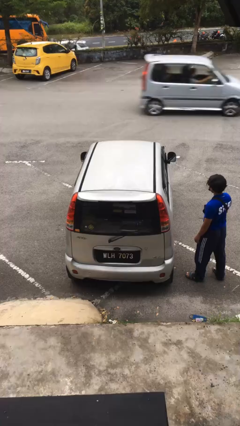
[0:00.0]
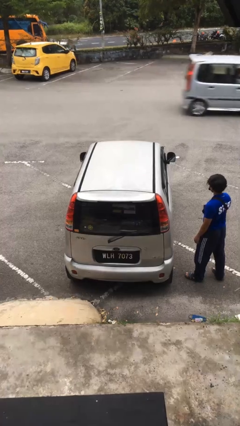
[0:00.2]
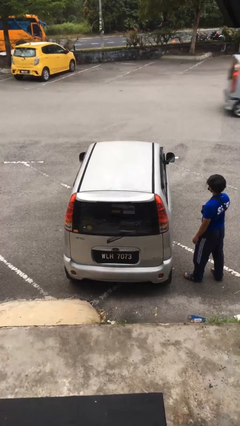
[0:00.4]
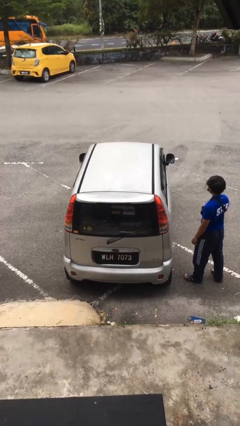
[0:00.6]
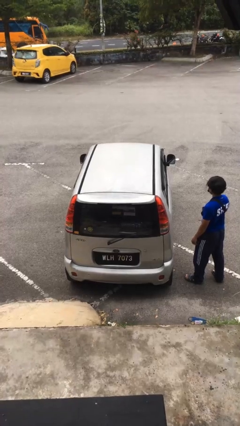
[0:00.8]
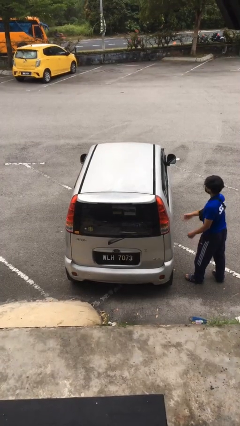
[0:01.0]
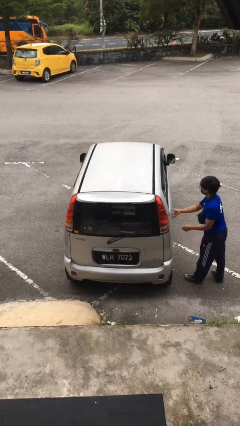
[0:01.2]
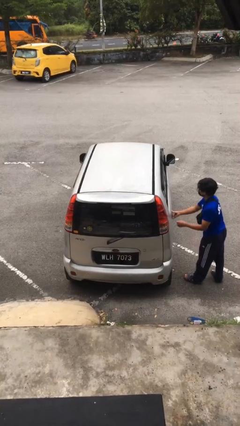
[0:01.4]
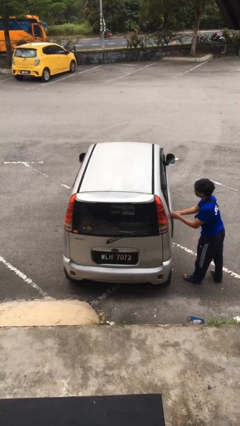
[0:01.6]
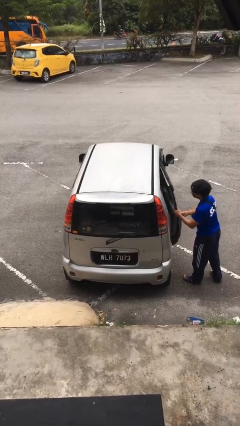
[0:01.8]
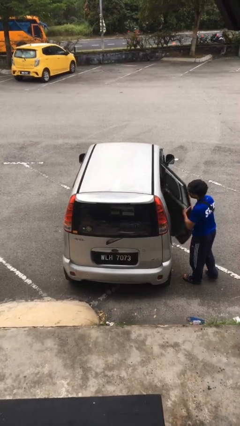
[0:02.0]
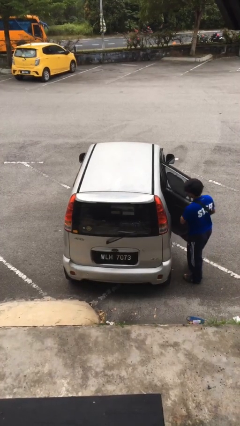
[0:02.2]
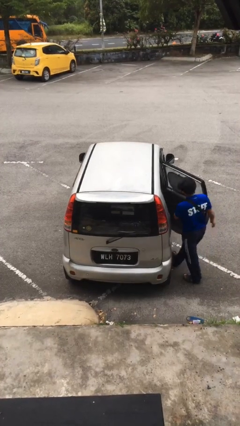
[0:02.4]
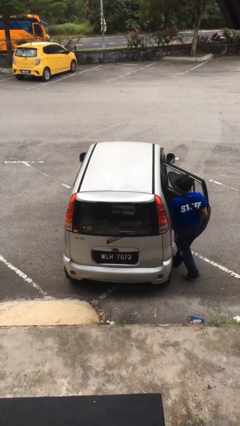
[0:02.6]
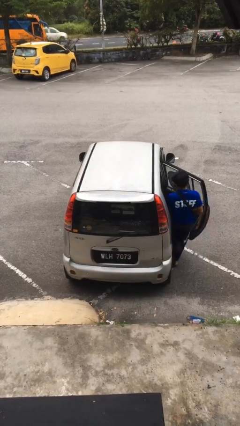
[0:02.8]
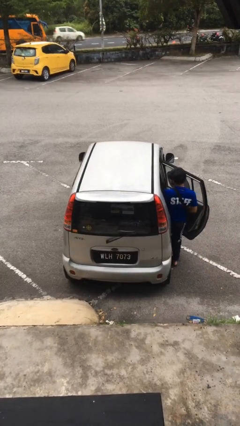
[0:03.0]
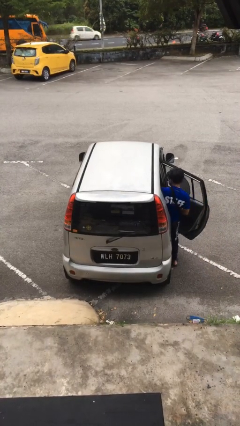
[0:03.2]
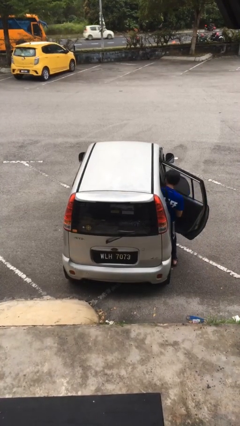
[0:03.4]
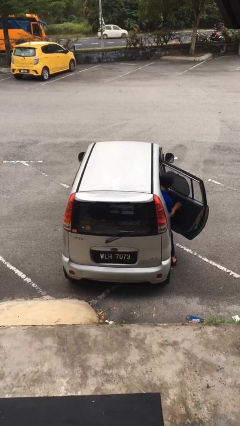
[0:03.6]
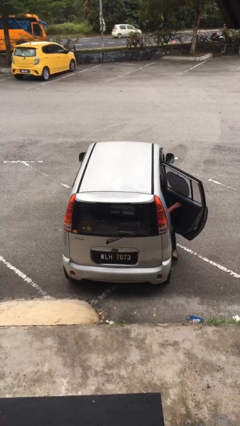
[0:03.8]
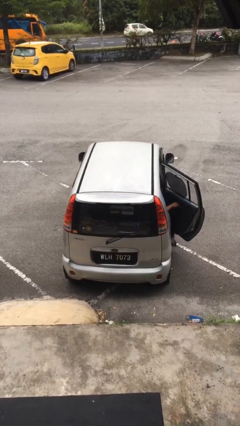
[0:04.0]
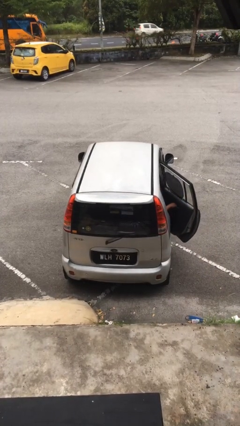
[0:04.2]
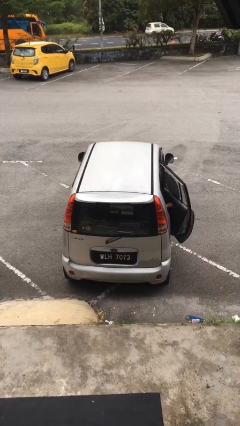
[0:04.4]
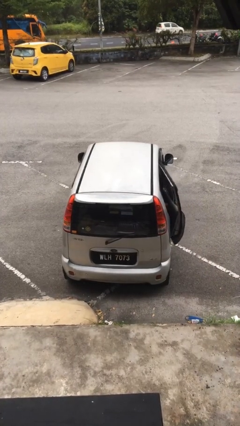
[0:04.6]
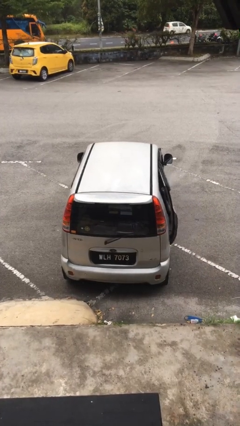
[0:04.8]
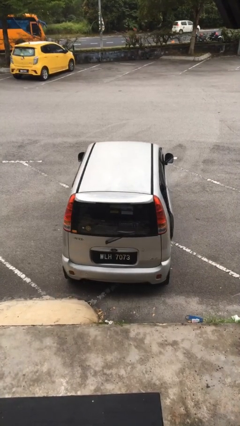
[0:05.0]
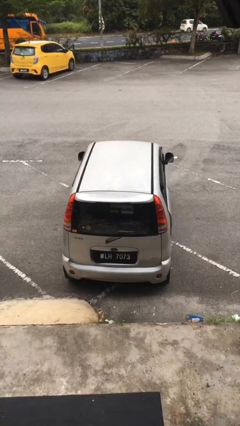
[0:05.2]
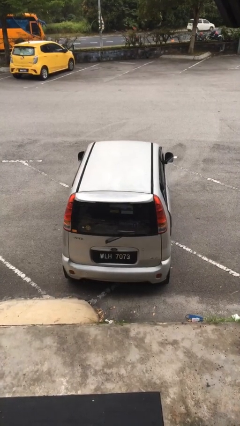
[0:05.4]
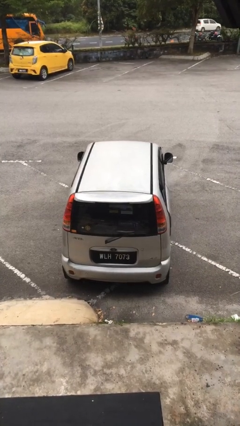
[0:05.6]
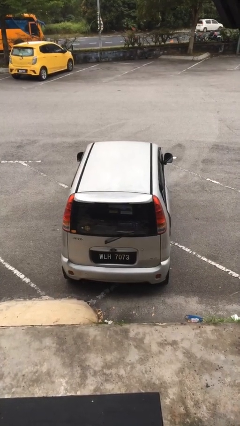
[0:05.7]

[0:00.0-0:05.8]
car picks up person

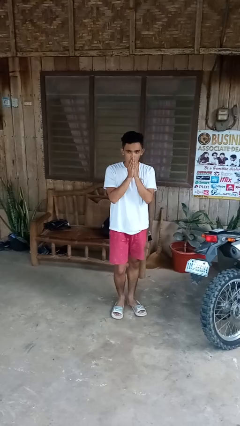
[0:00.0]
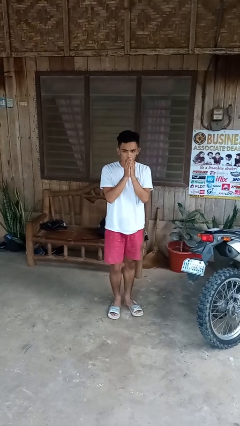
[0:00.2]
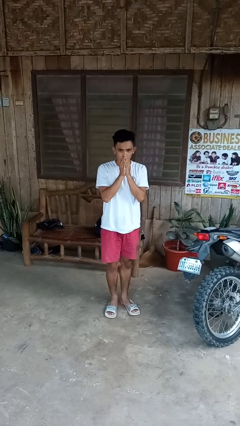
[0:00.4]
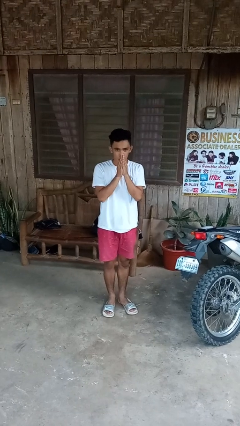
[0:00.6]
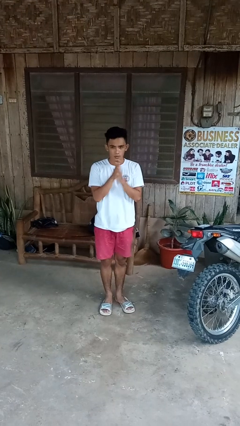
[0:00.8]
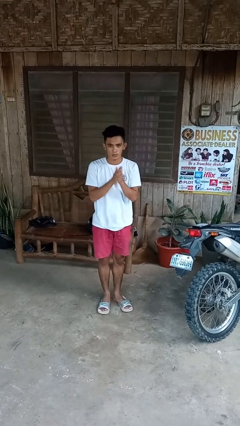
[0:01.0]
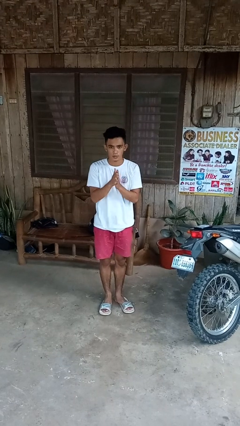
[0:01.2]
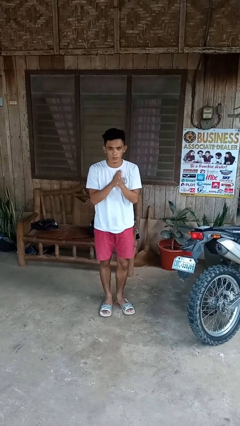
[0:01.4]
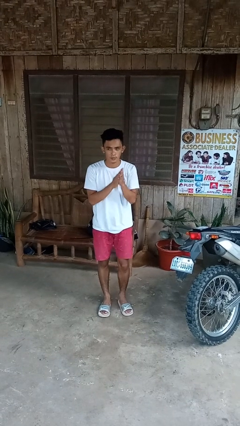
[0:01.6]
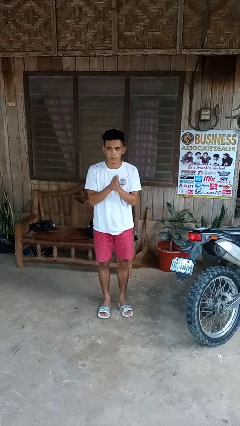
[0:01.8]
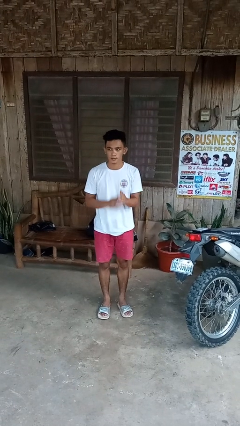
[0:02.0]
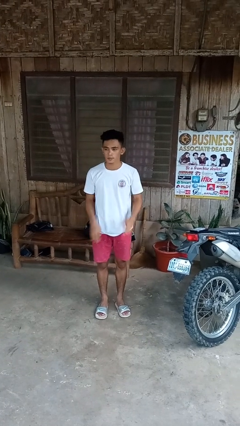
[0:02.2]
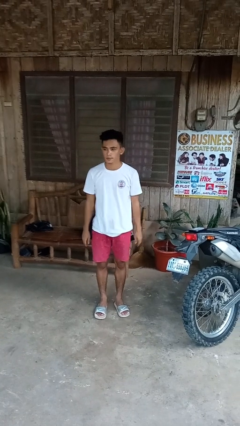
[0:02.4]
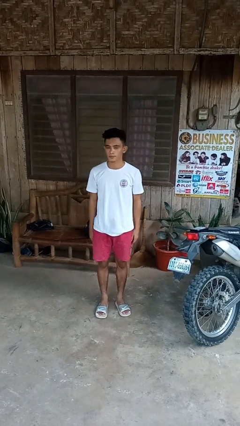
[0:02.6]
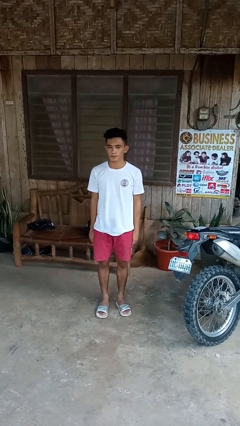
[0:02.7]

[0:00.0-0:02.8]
person blows into hands

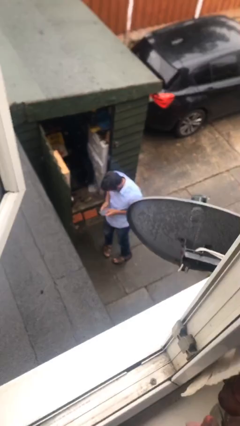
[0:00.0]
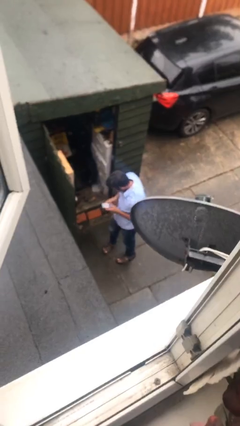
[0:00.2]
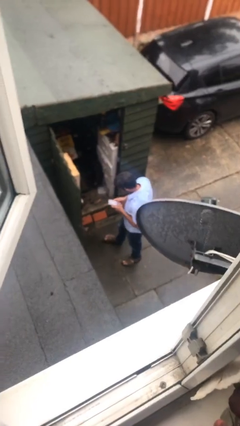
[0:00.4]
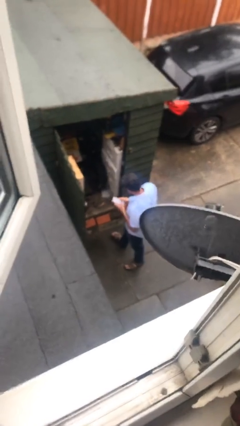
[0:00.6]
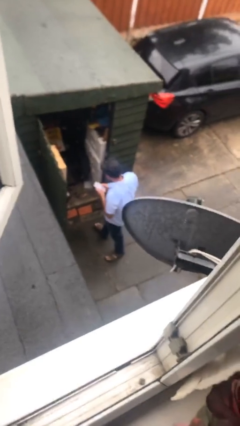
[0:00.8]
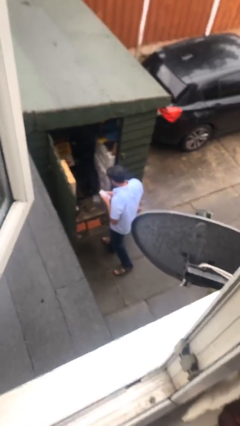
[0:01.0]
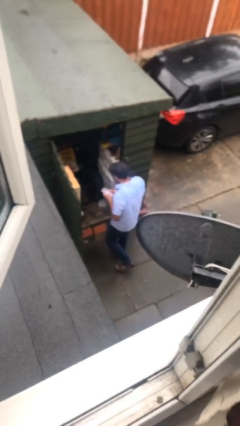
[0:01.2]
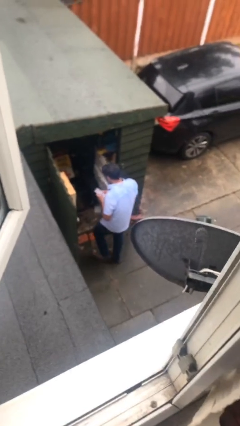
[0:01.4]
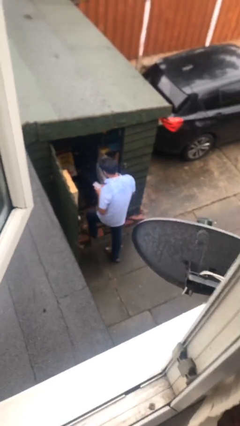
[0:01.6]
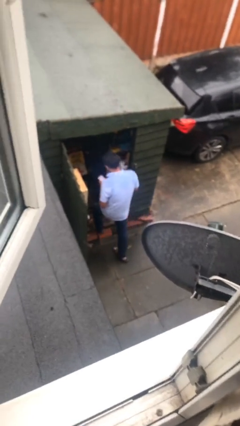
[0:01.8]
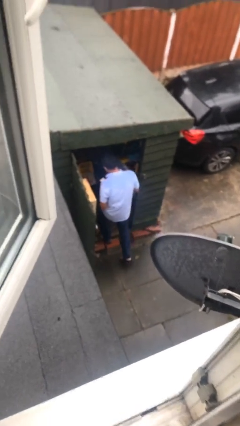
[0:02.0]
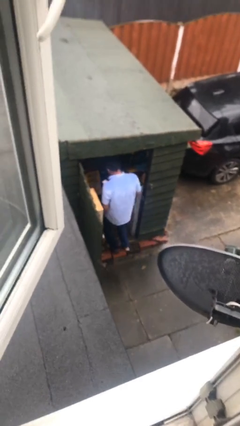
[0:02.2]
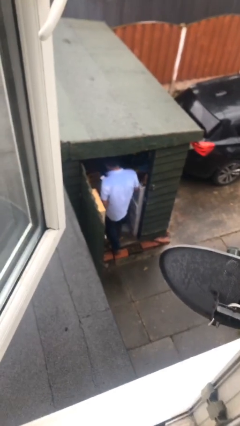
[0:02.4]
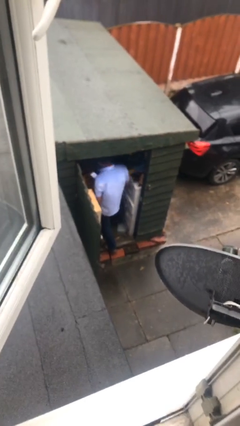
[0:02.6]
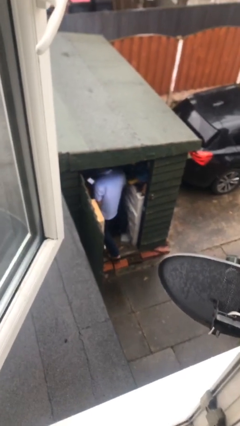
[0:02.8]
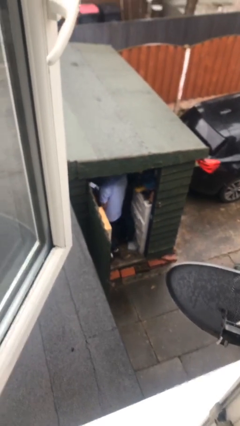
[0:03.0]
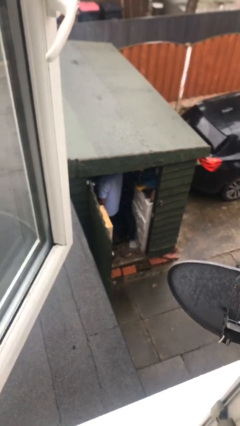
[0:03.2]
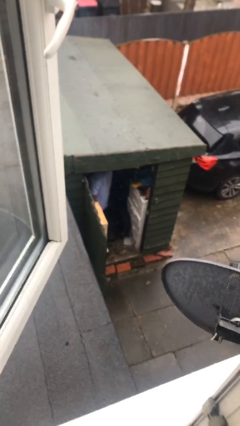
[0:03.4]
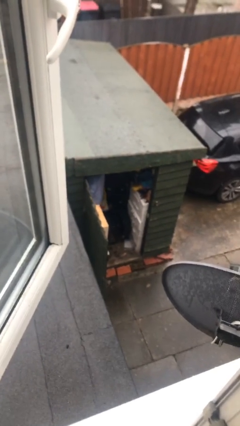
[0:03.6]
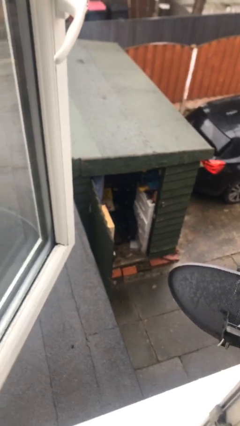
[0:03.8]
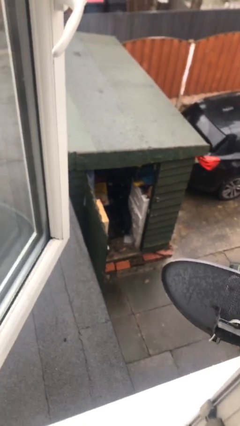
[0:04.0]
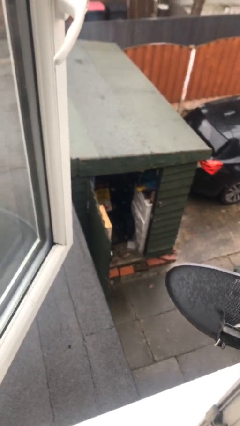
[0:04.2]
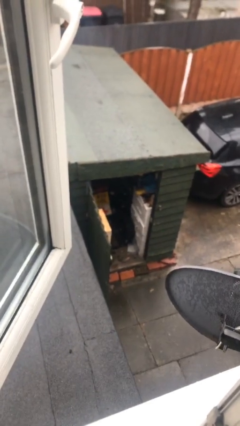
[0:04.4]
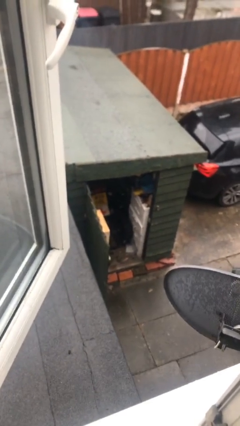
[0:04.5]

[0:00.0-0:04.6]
person exits scene through structure

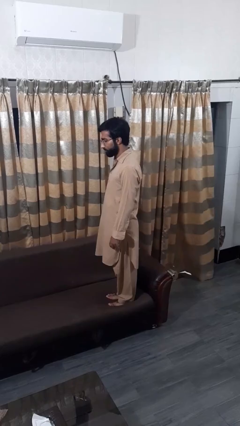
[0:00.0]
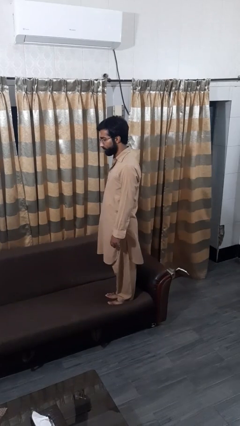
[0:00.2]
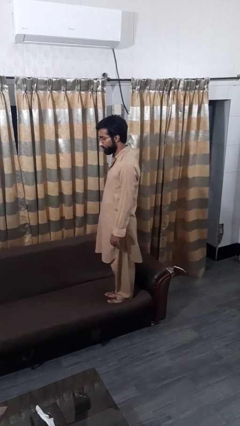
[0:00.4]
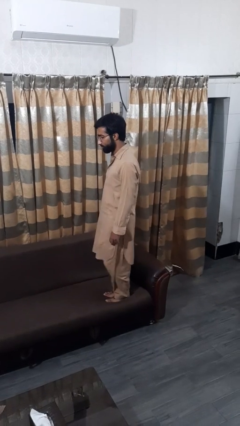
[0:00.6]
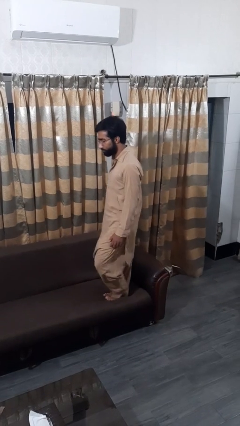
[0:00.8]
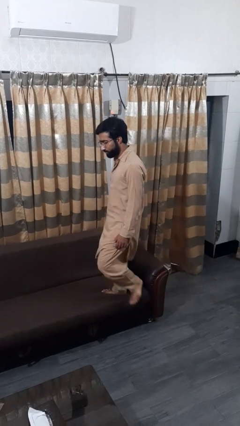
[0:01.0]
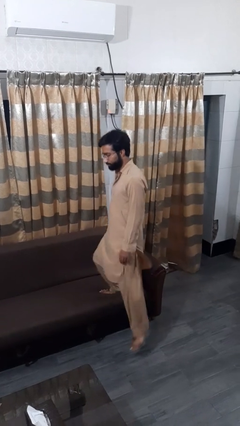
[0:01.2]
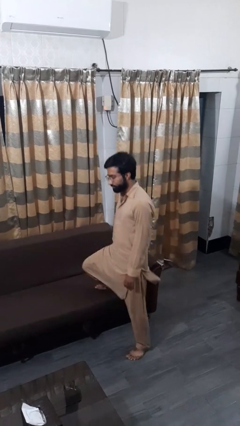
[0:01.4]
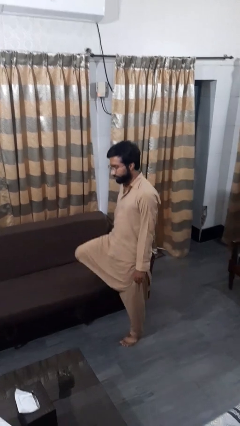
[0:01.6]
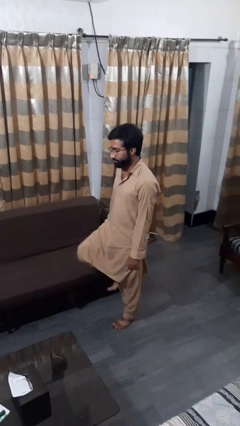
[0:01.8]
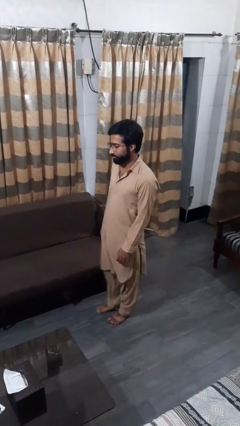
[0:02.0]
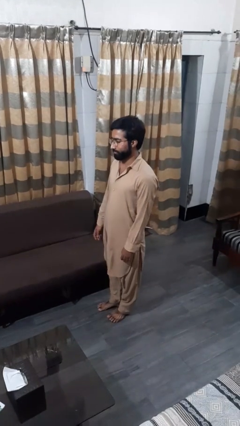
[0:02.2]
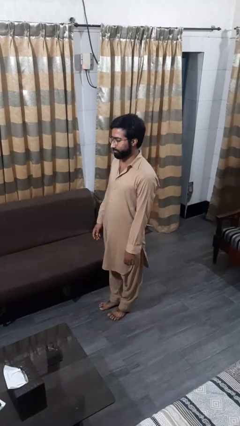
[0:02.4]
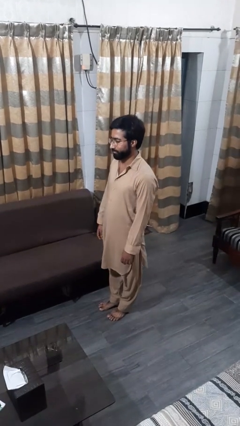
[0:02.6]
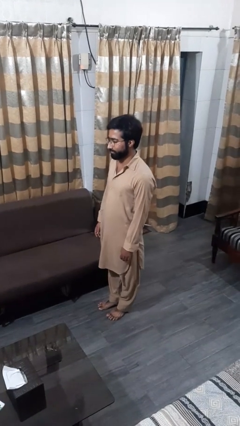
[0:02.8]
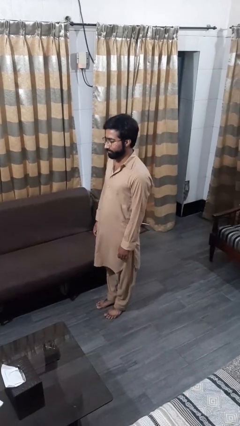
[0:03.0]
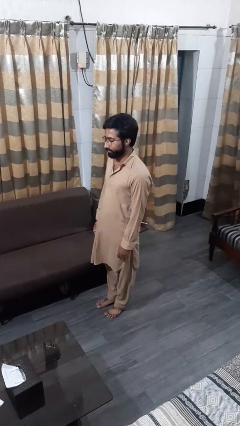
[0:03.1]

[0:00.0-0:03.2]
person climbs off couch

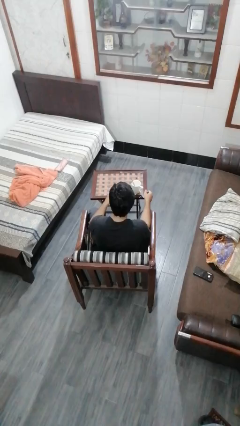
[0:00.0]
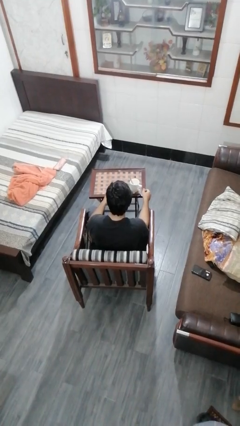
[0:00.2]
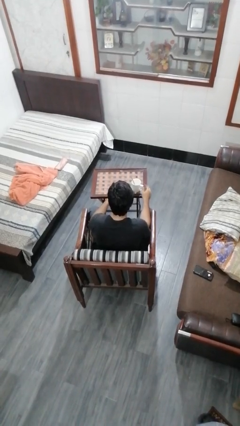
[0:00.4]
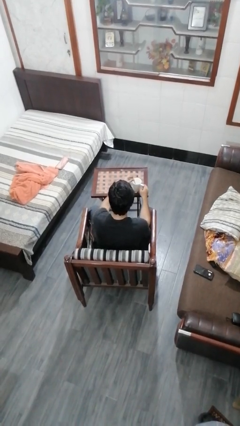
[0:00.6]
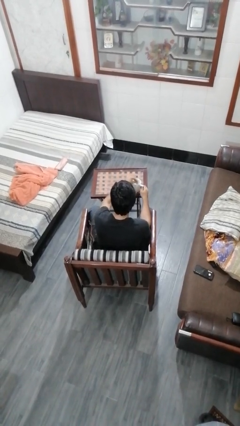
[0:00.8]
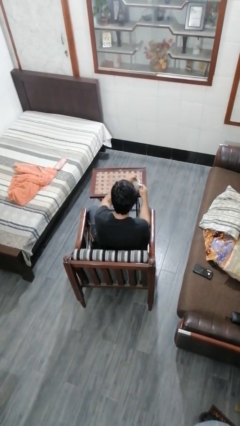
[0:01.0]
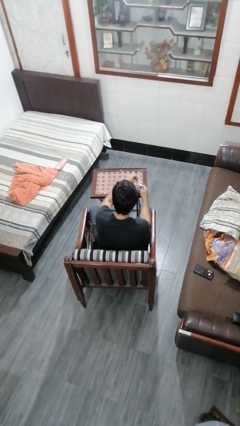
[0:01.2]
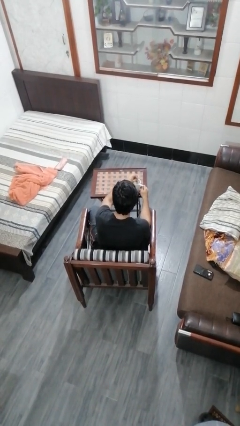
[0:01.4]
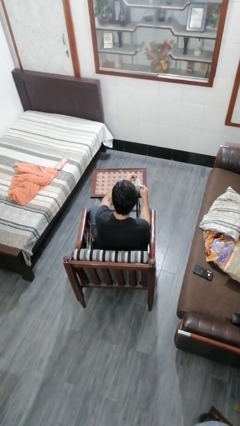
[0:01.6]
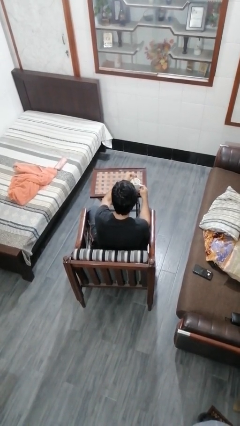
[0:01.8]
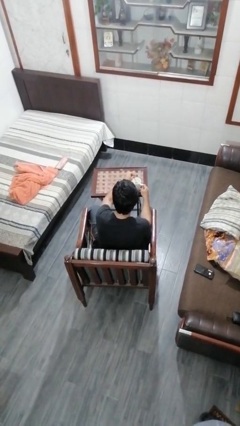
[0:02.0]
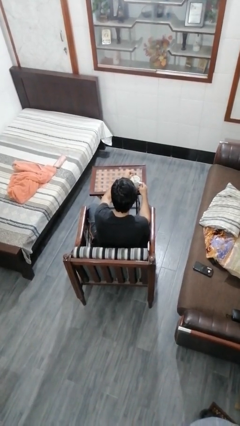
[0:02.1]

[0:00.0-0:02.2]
person stirs mug
